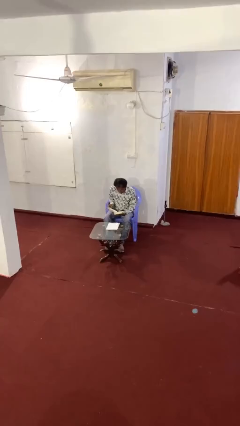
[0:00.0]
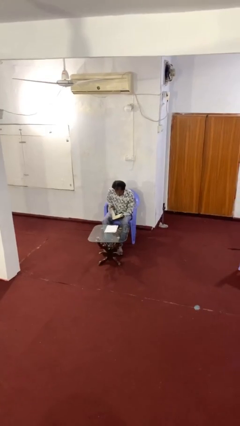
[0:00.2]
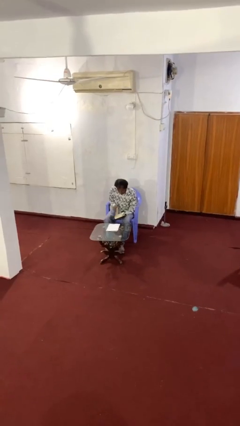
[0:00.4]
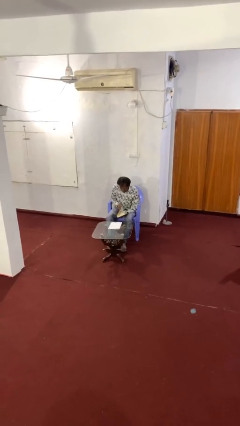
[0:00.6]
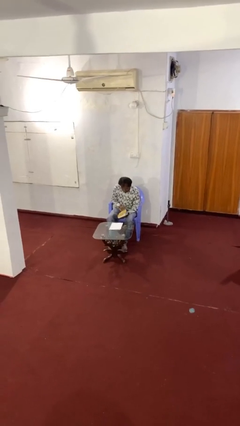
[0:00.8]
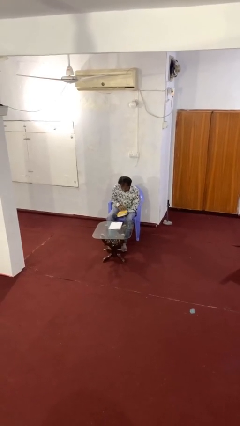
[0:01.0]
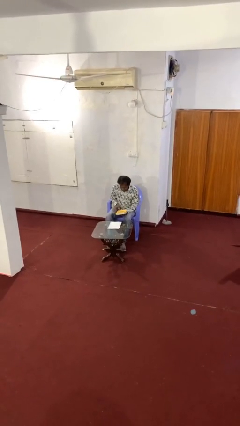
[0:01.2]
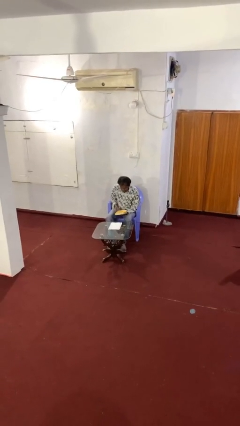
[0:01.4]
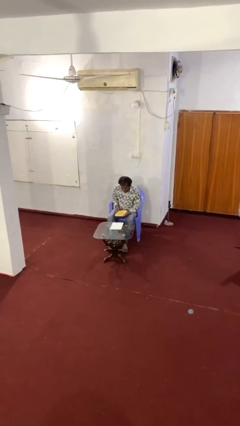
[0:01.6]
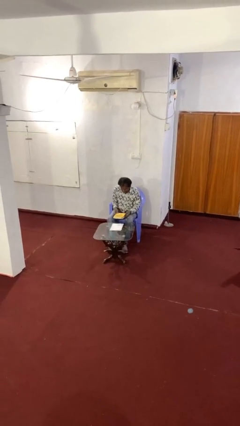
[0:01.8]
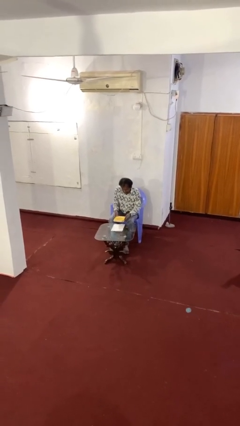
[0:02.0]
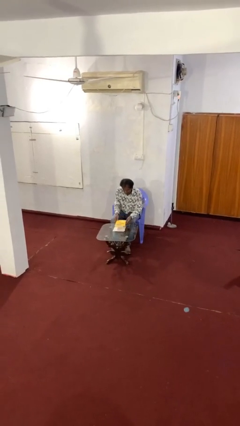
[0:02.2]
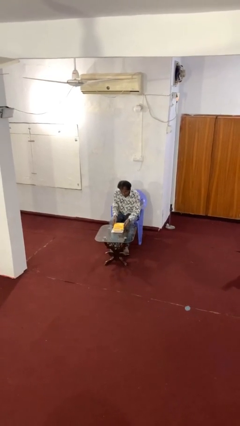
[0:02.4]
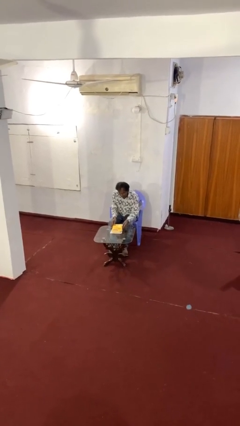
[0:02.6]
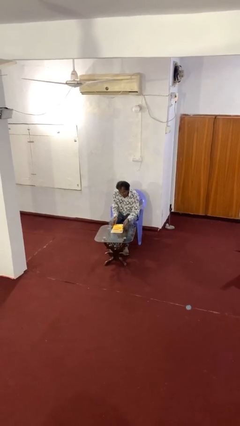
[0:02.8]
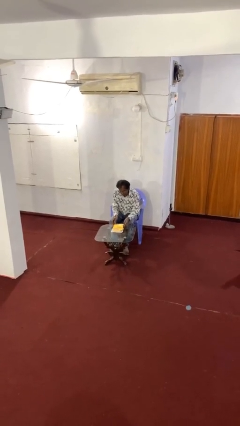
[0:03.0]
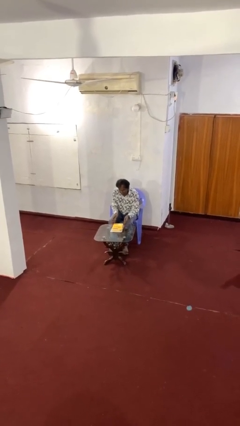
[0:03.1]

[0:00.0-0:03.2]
person puts down object on table

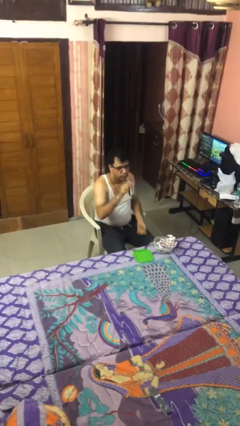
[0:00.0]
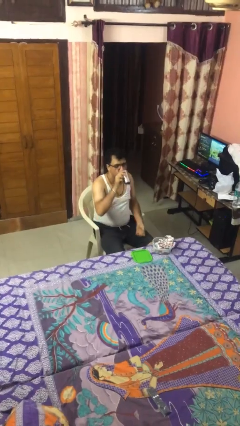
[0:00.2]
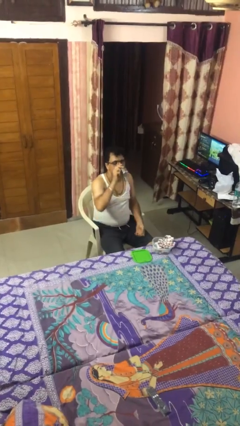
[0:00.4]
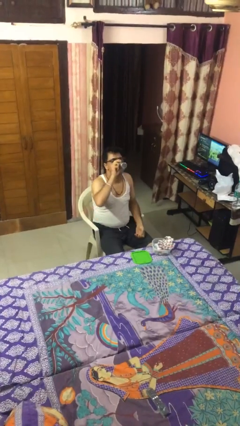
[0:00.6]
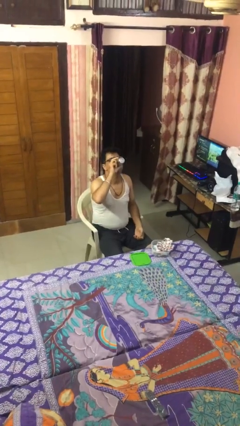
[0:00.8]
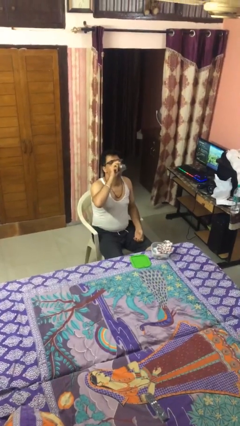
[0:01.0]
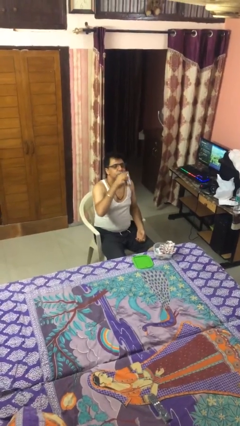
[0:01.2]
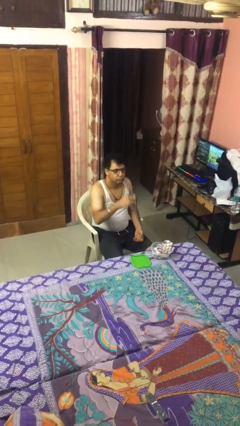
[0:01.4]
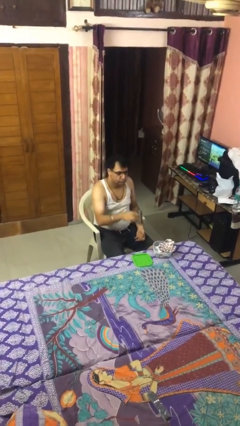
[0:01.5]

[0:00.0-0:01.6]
person drinks from cup

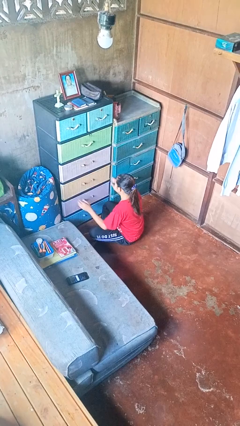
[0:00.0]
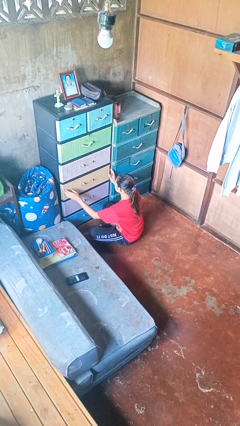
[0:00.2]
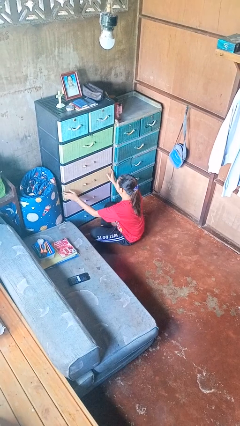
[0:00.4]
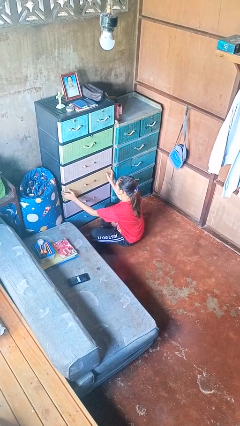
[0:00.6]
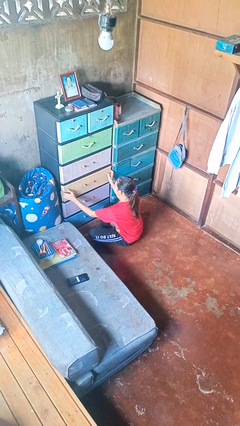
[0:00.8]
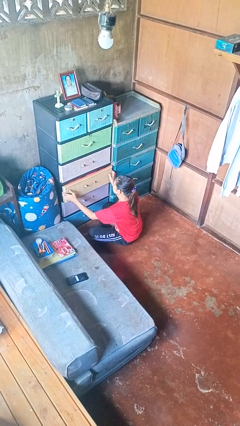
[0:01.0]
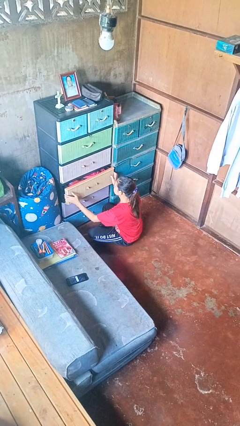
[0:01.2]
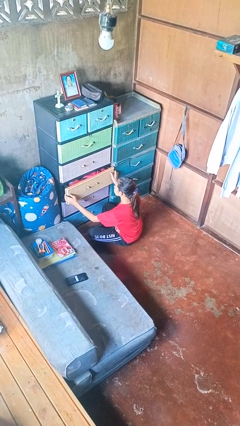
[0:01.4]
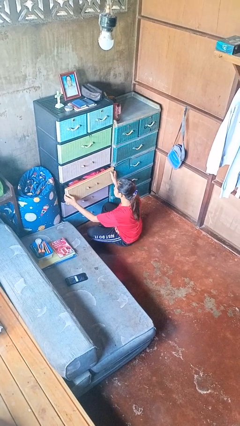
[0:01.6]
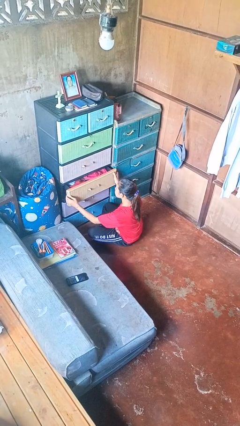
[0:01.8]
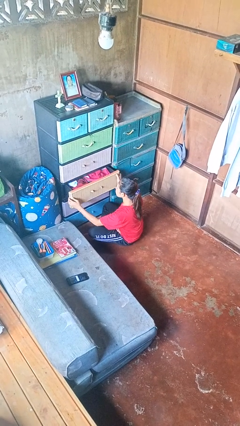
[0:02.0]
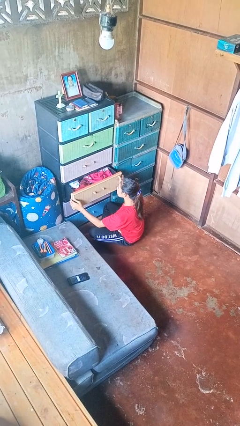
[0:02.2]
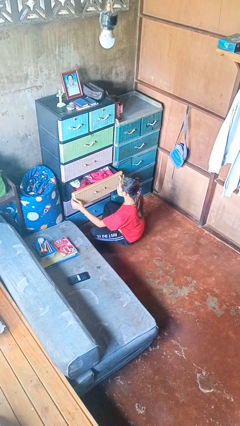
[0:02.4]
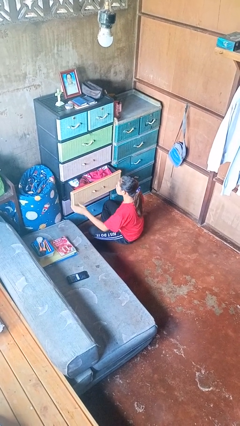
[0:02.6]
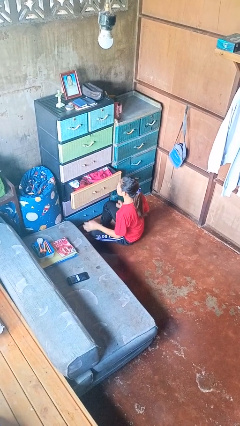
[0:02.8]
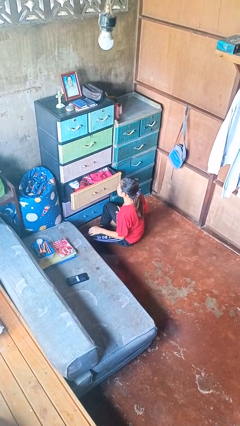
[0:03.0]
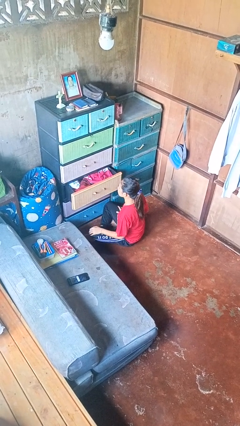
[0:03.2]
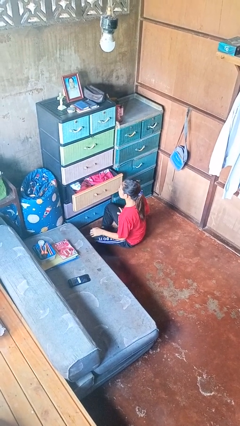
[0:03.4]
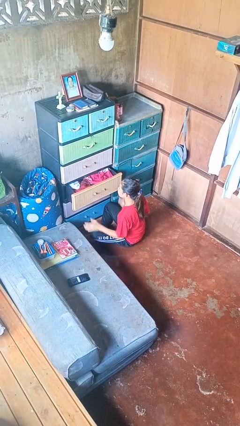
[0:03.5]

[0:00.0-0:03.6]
person opens dresser drawer

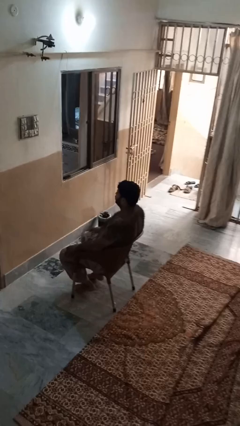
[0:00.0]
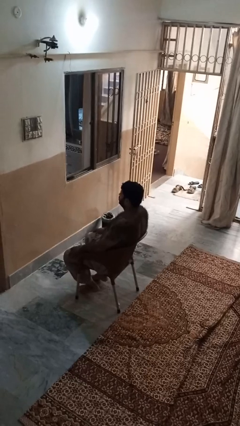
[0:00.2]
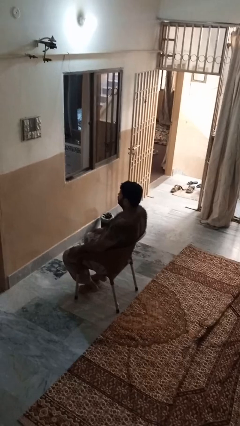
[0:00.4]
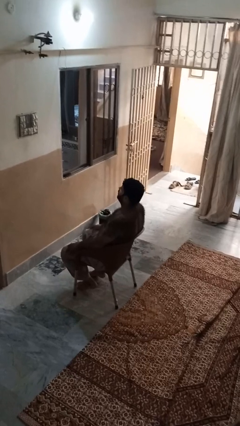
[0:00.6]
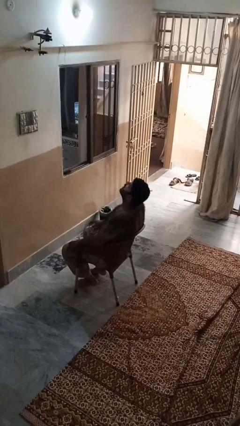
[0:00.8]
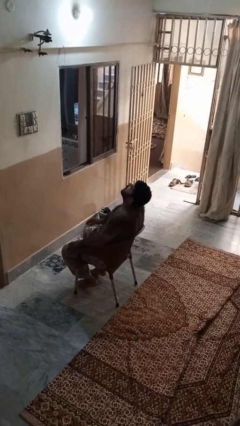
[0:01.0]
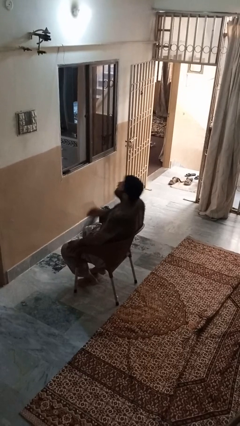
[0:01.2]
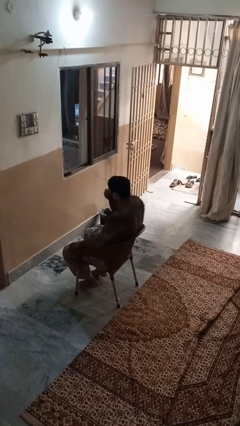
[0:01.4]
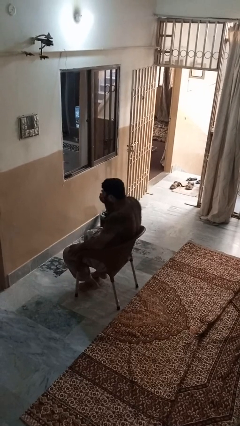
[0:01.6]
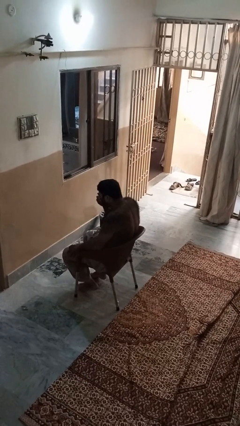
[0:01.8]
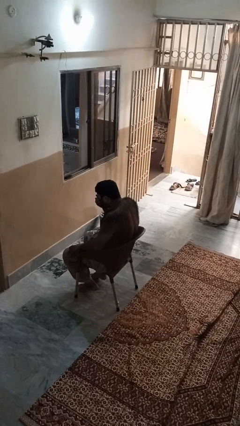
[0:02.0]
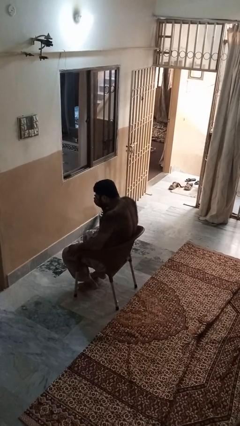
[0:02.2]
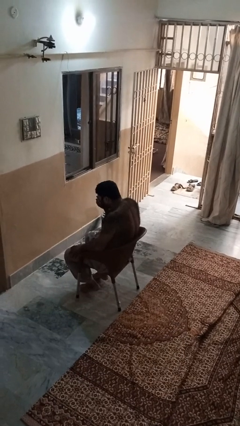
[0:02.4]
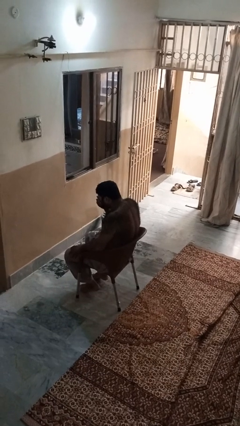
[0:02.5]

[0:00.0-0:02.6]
person sneezes into hand

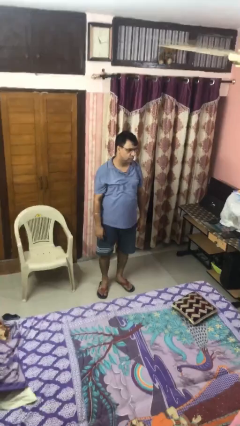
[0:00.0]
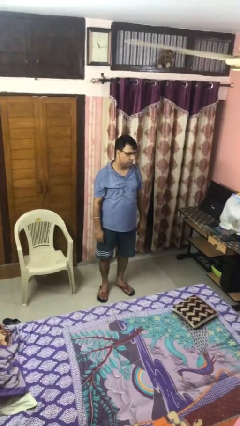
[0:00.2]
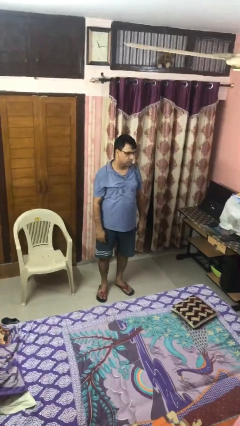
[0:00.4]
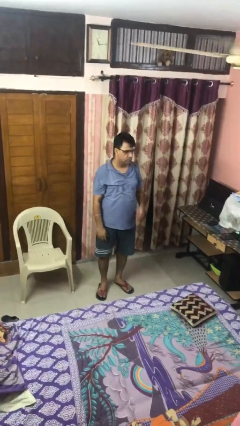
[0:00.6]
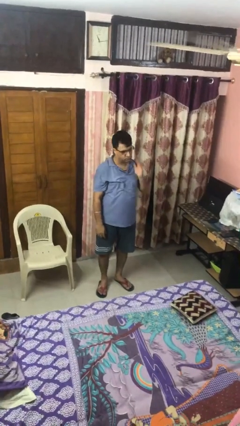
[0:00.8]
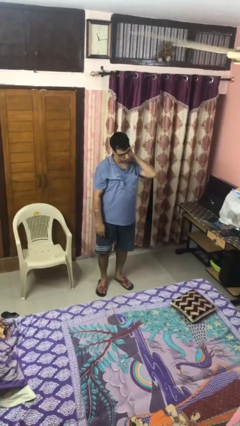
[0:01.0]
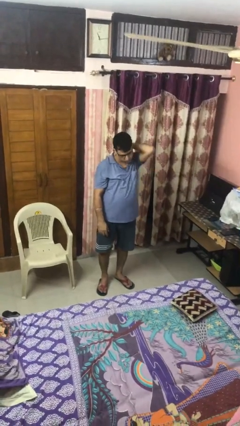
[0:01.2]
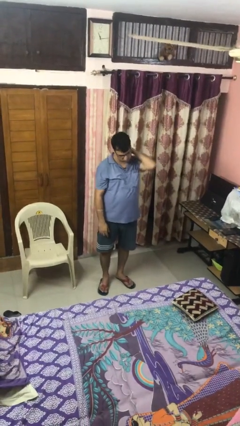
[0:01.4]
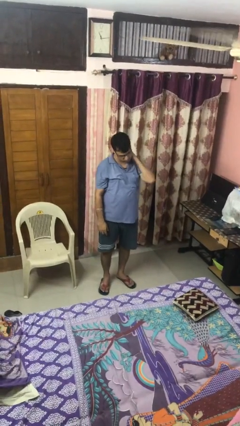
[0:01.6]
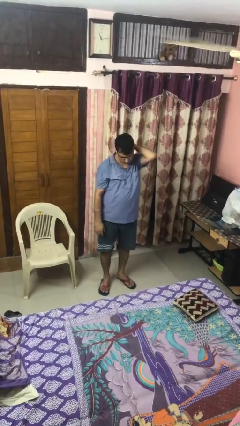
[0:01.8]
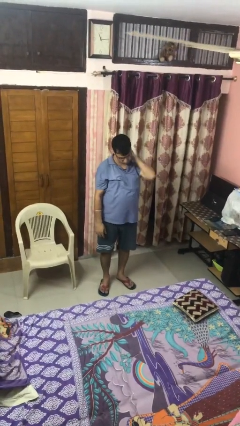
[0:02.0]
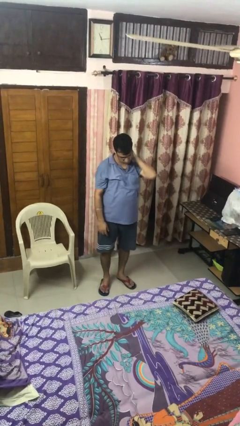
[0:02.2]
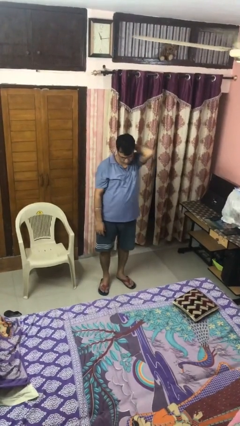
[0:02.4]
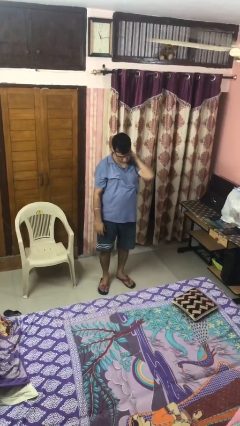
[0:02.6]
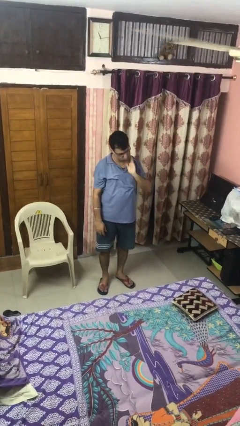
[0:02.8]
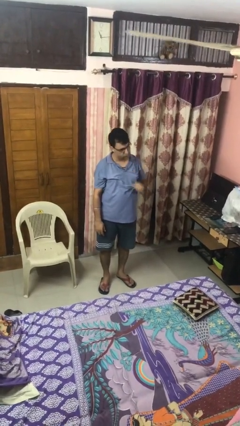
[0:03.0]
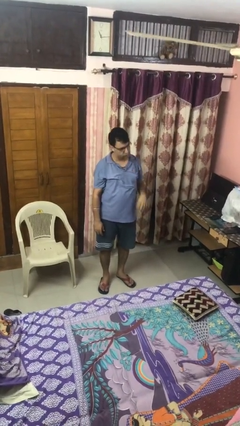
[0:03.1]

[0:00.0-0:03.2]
person rubs neck

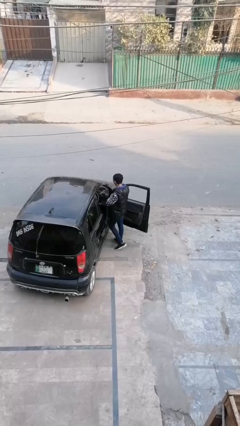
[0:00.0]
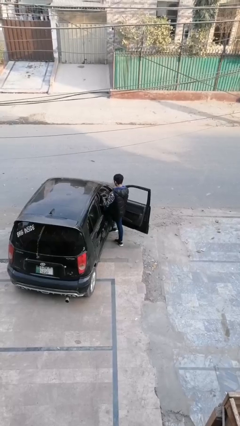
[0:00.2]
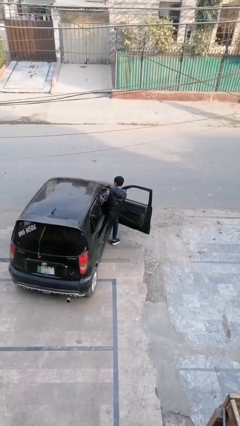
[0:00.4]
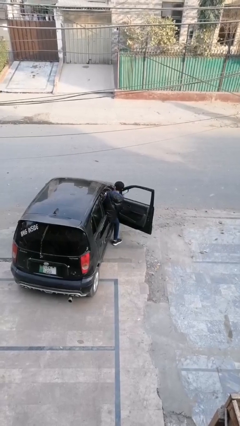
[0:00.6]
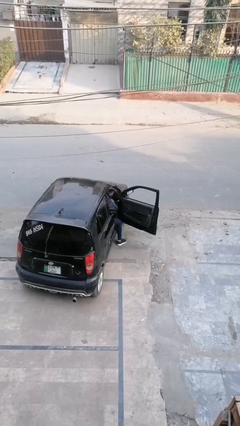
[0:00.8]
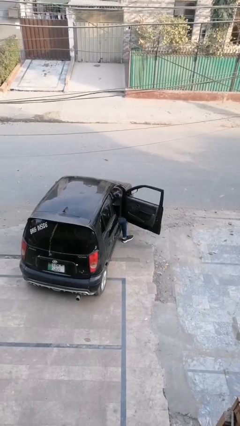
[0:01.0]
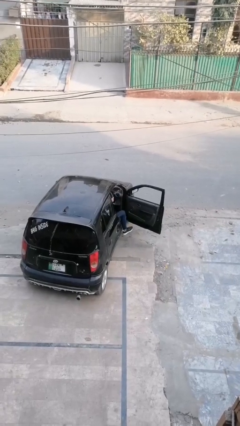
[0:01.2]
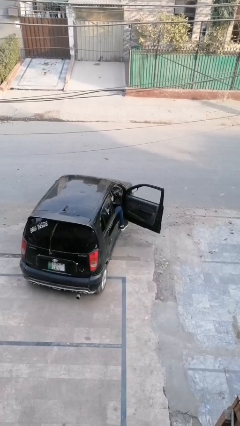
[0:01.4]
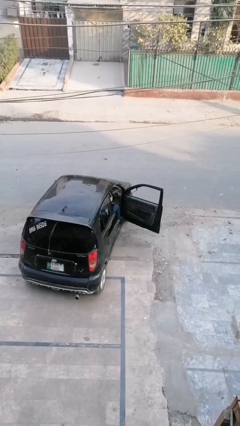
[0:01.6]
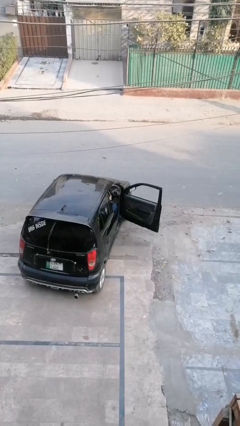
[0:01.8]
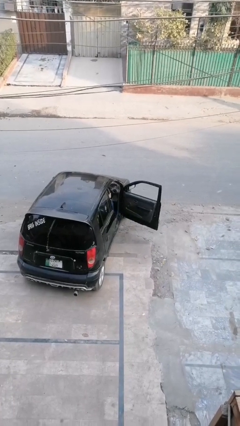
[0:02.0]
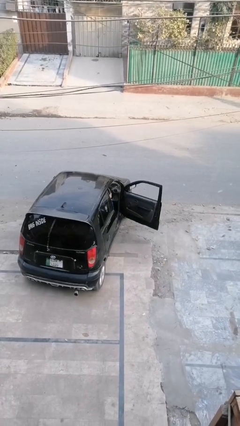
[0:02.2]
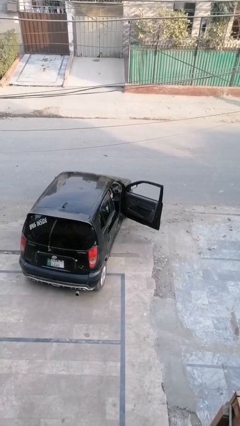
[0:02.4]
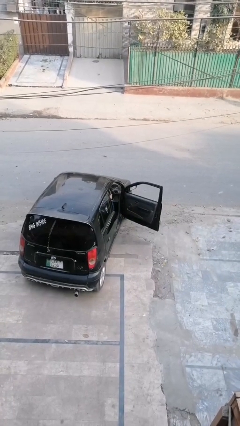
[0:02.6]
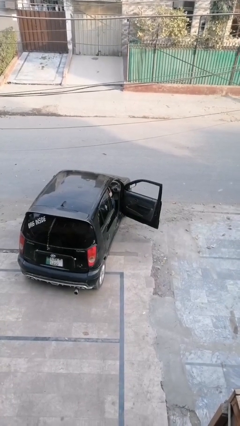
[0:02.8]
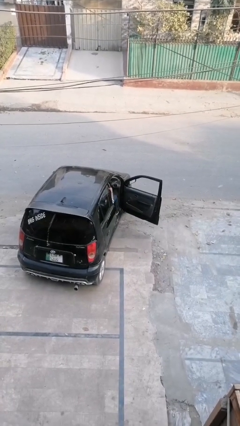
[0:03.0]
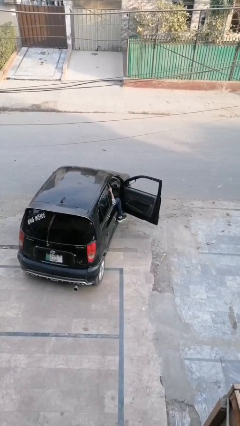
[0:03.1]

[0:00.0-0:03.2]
person enters car

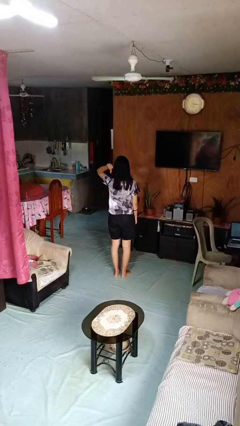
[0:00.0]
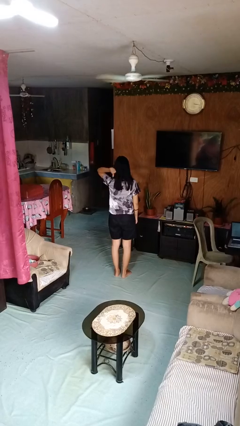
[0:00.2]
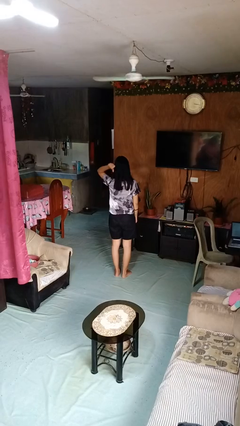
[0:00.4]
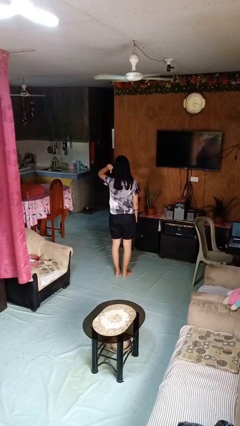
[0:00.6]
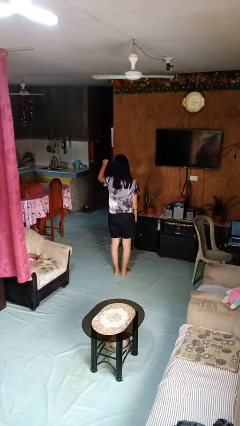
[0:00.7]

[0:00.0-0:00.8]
person gestures behind me
